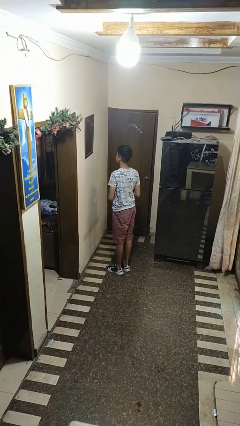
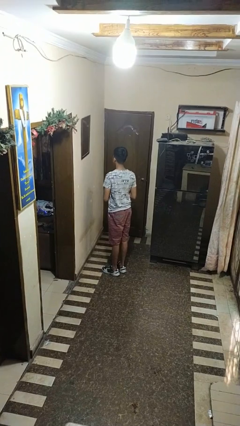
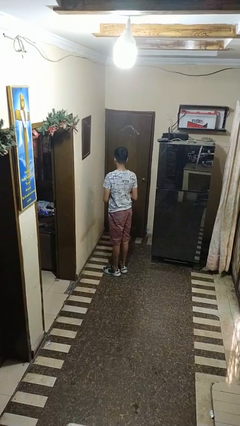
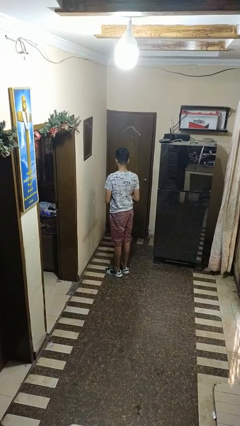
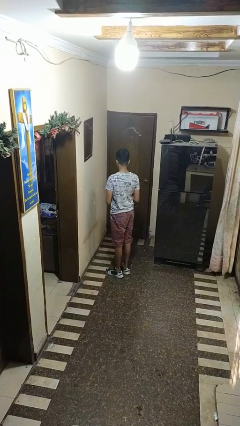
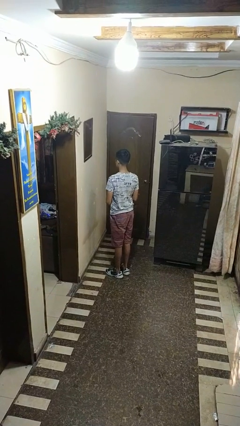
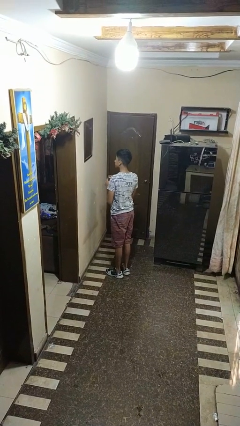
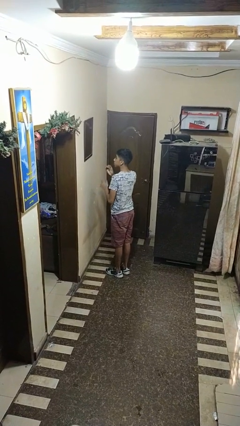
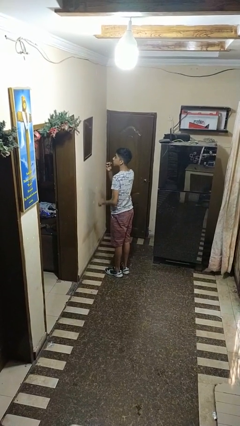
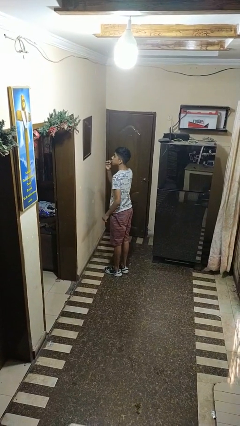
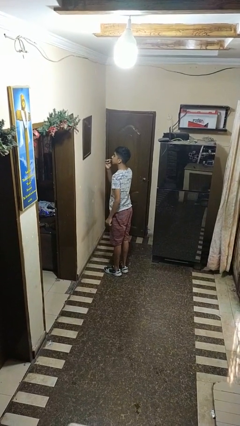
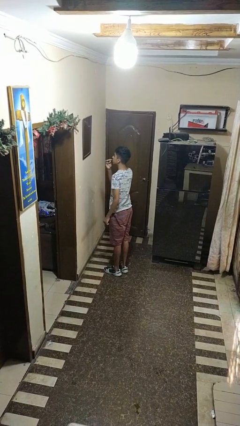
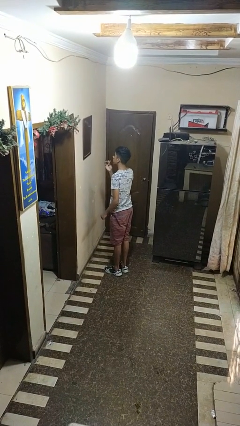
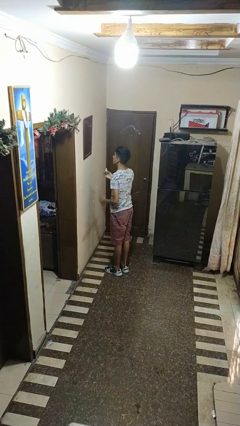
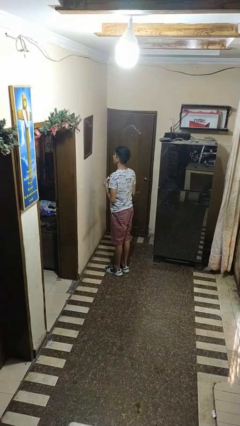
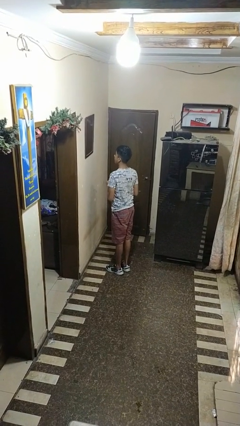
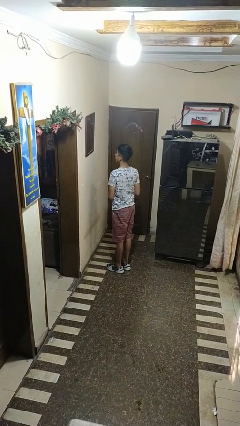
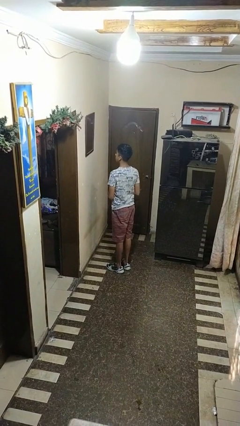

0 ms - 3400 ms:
person applies lip makeup

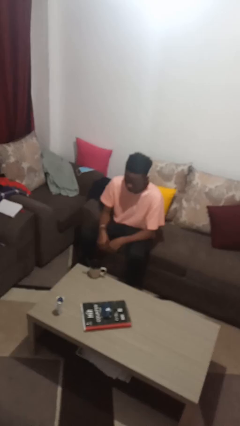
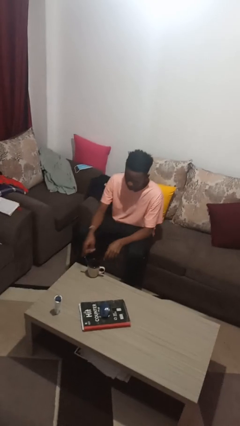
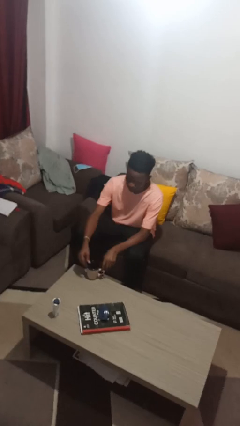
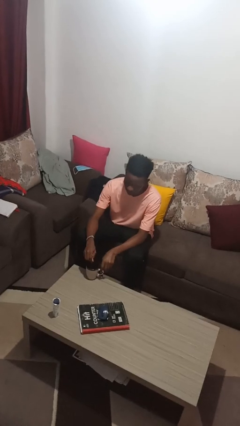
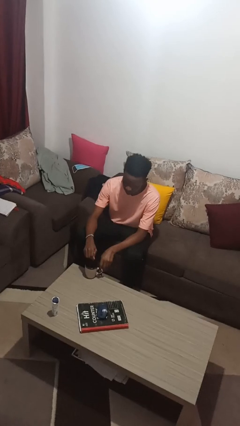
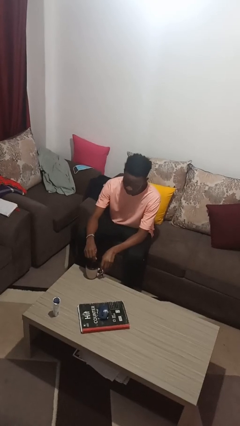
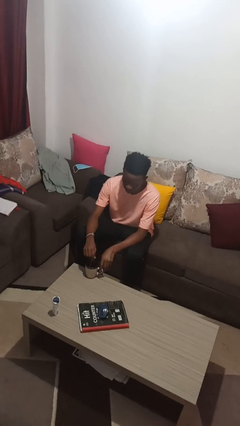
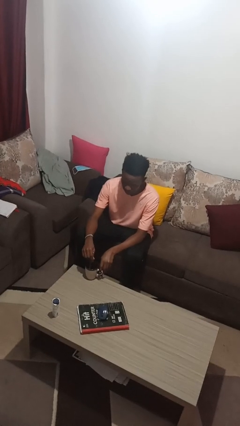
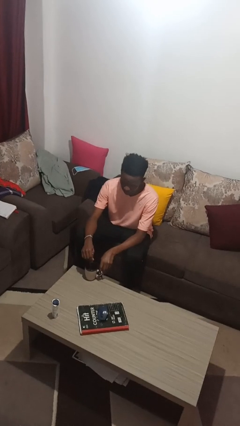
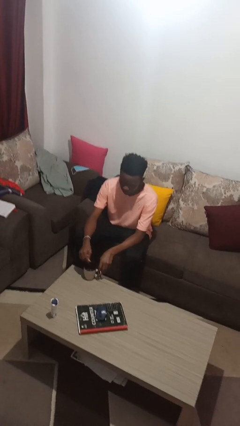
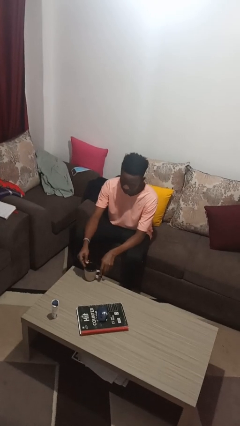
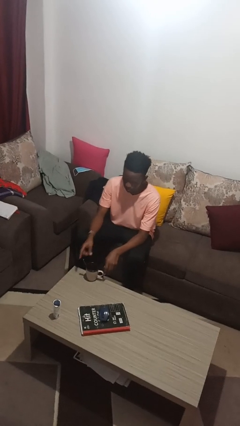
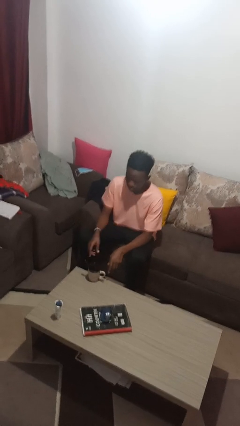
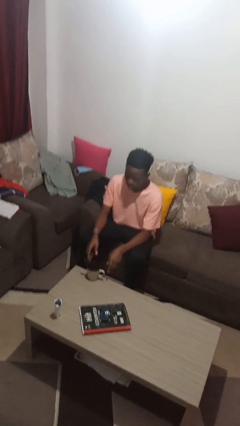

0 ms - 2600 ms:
person stirs mug

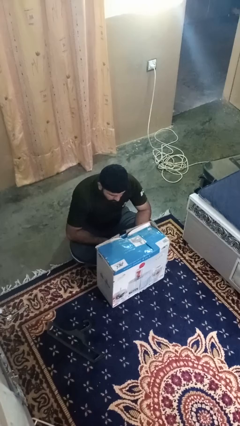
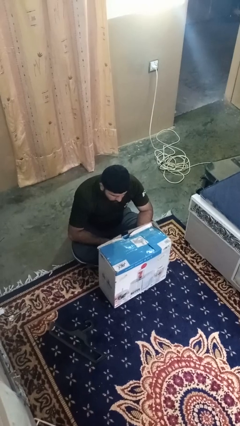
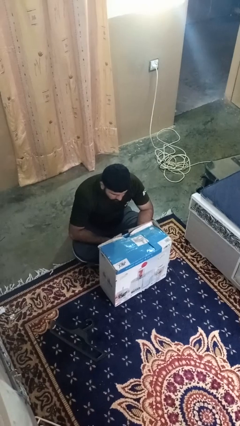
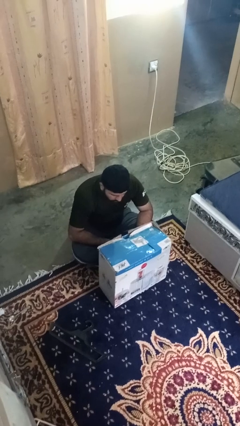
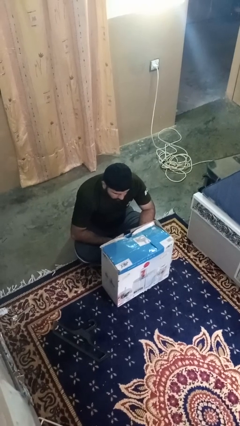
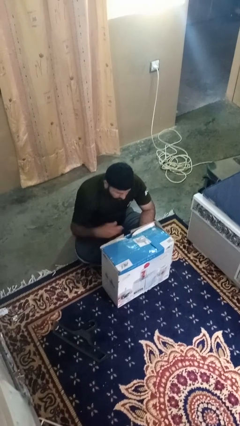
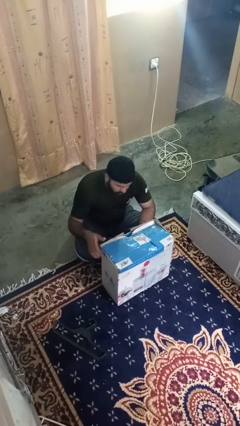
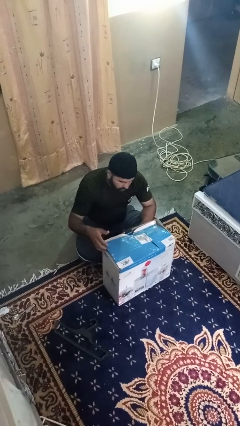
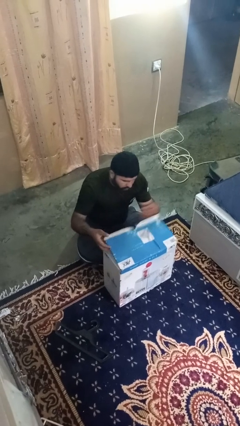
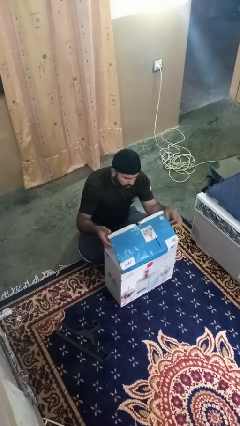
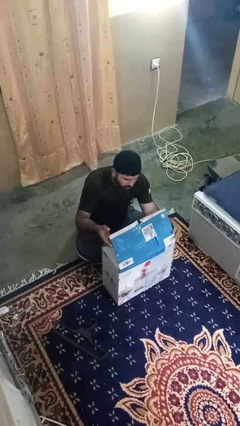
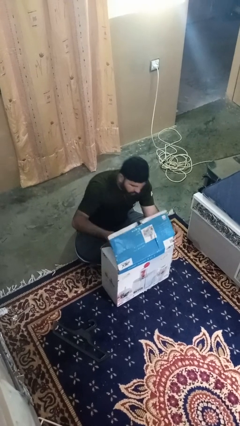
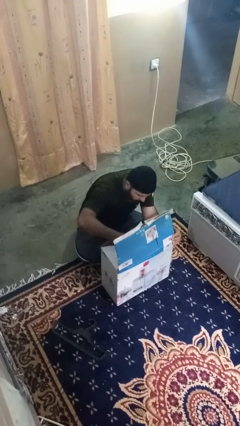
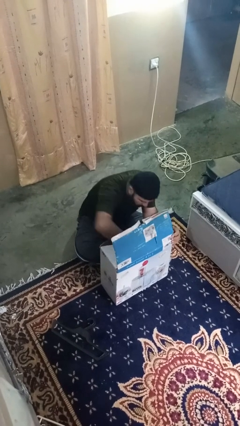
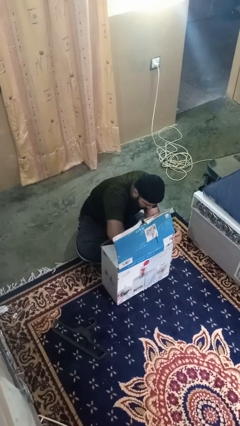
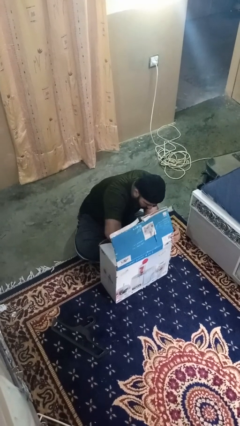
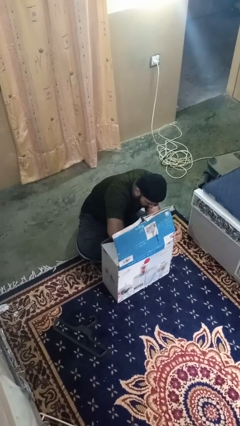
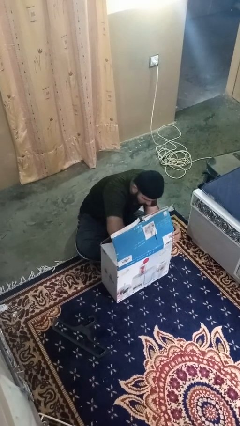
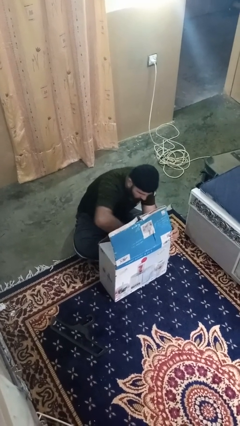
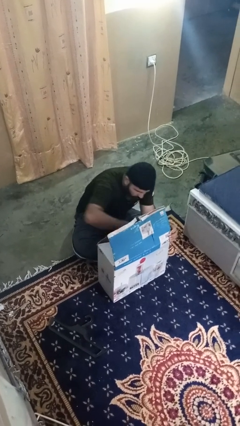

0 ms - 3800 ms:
person searches in box

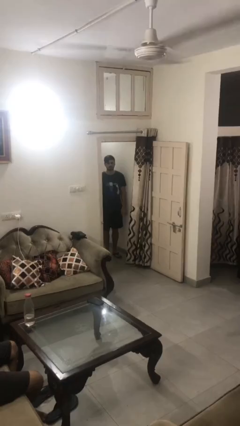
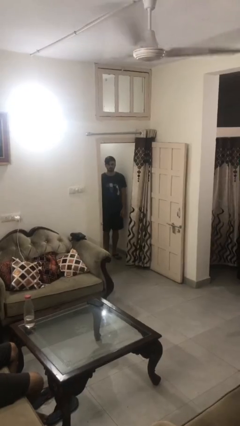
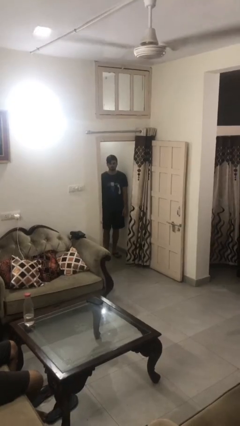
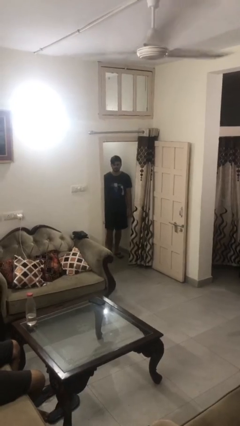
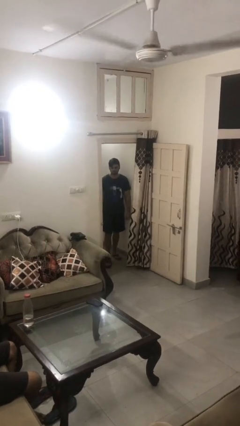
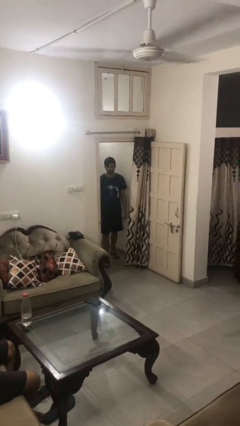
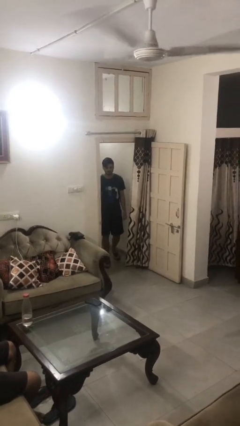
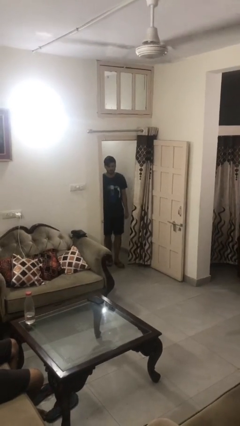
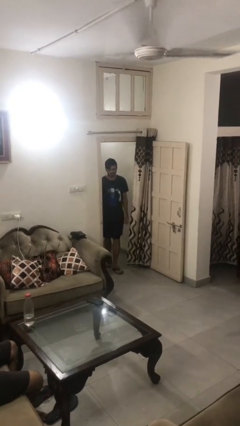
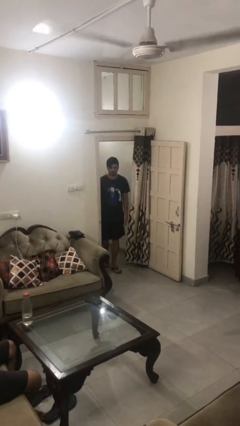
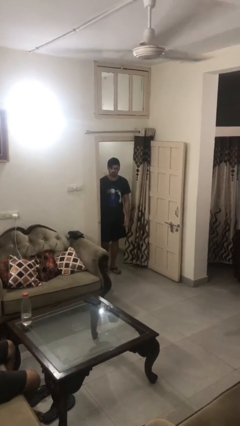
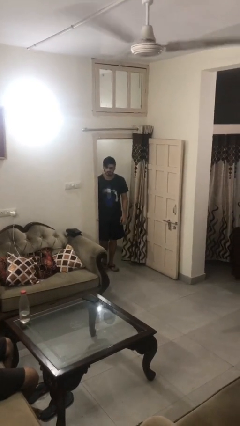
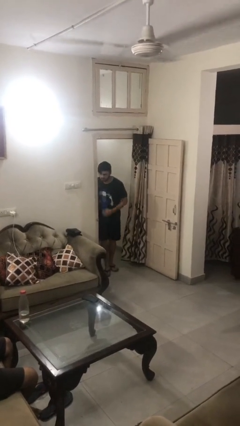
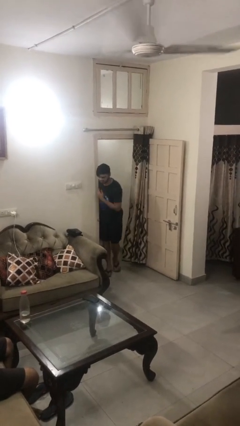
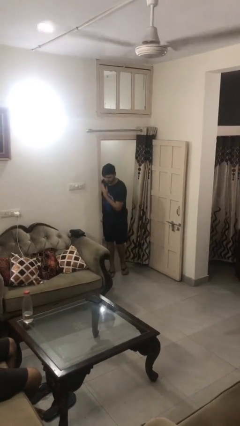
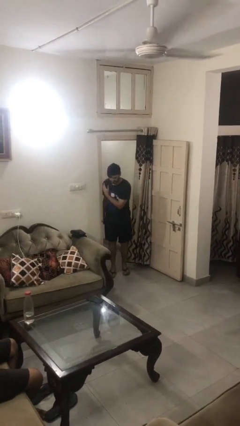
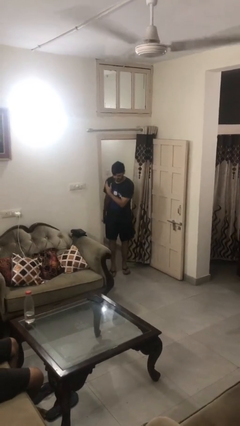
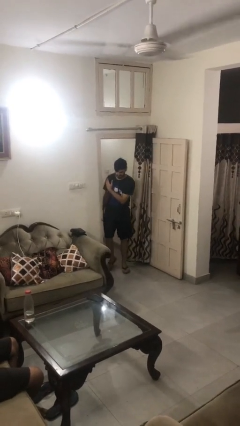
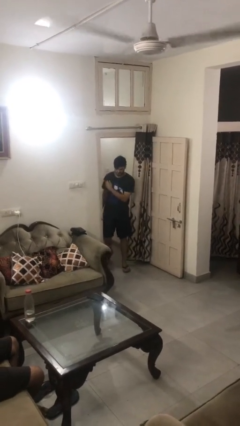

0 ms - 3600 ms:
person bumps into wall

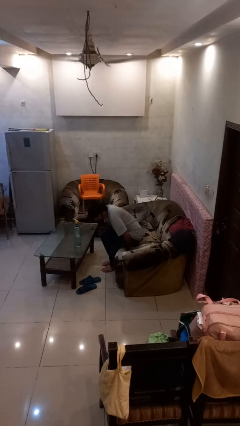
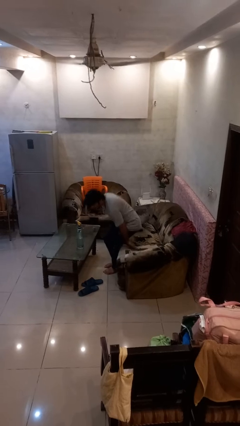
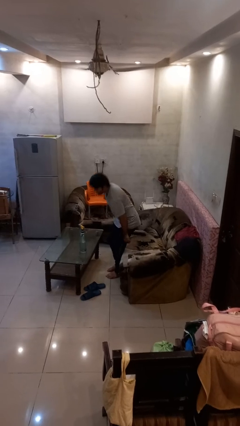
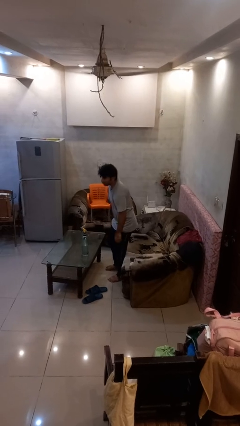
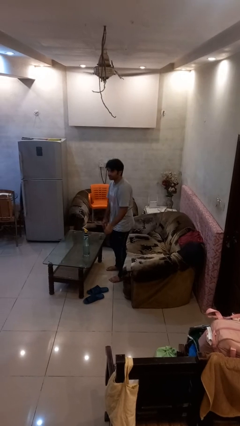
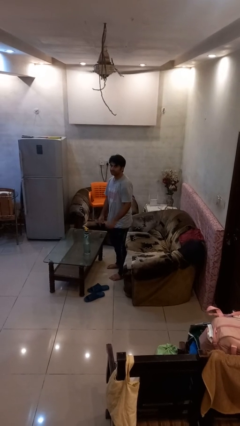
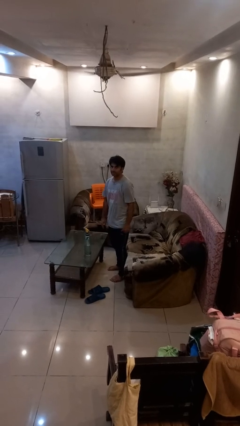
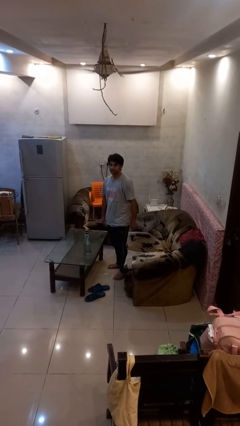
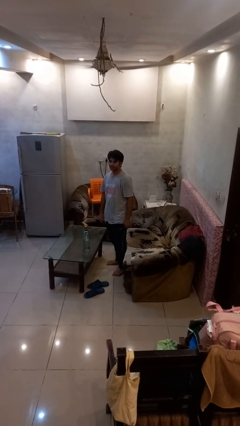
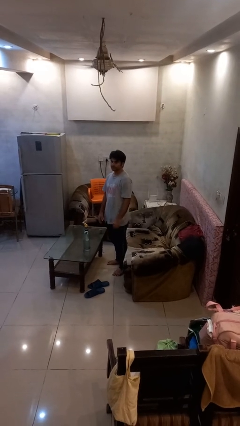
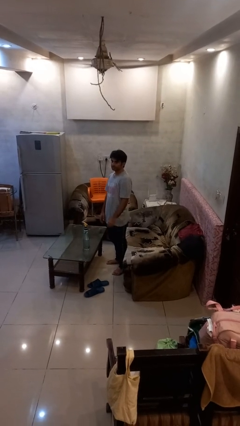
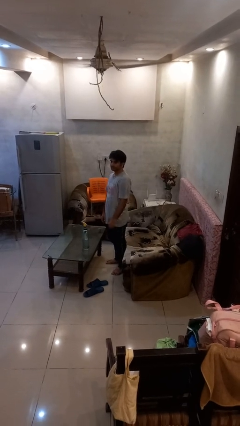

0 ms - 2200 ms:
person stands up

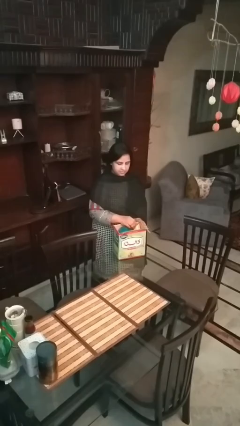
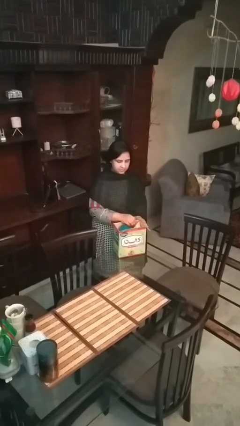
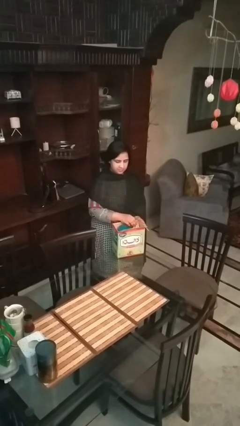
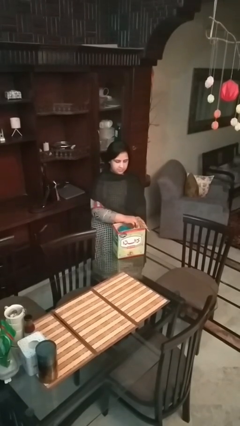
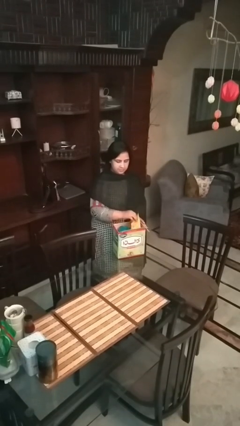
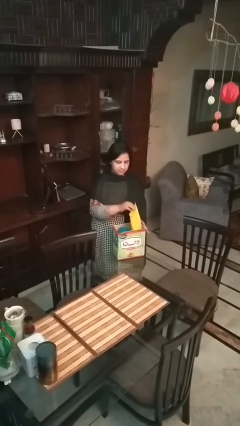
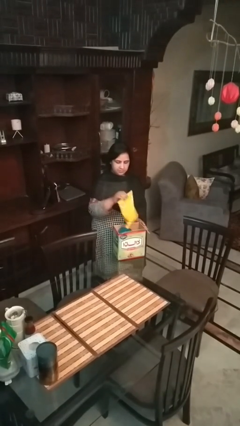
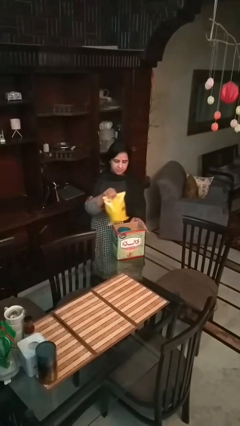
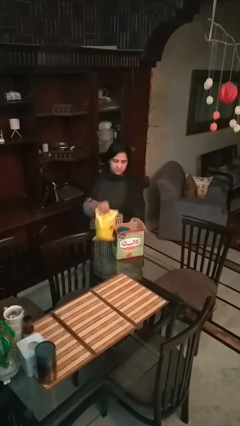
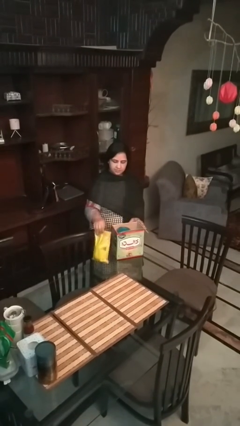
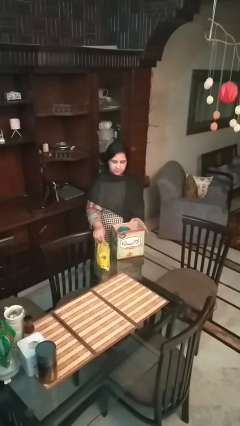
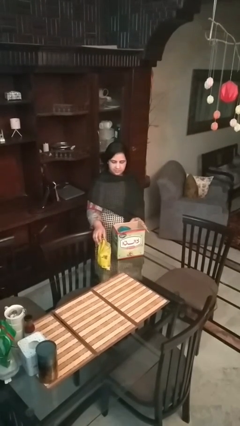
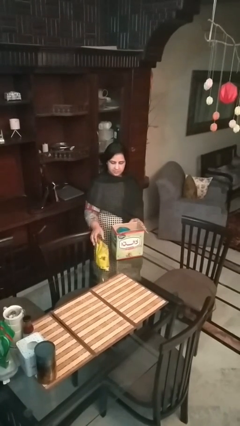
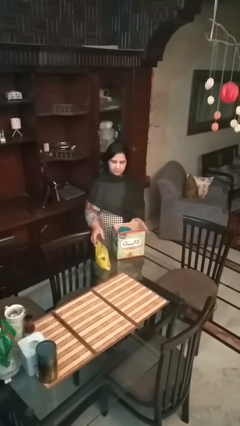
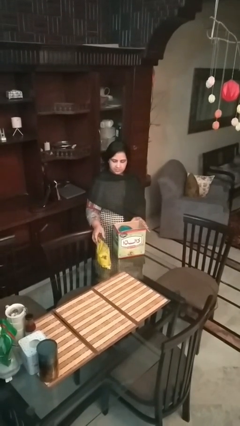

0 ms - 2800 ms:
person takes object from box
